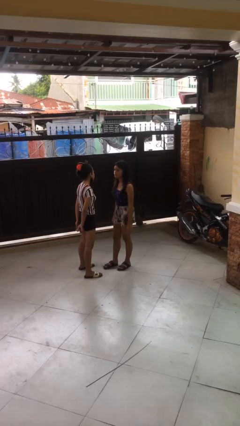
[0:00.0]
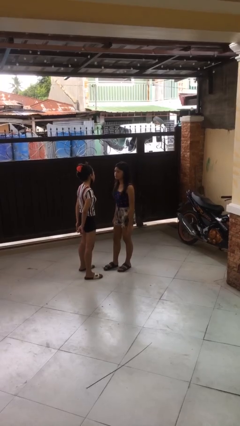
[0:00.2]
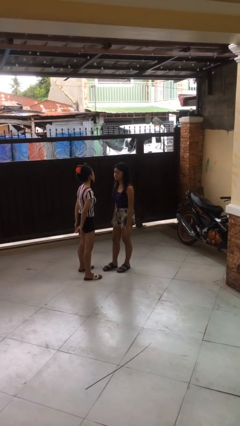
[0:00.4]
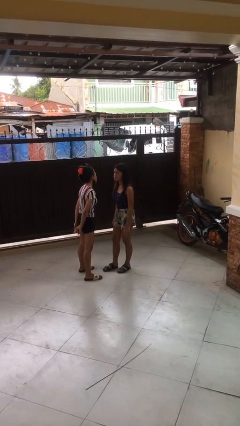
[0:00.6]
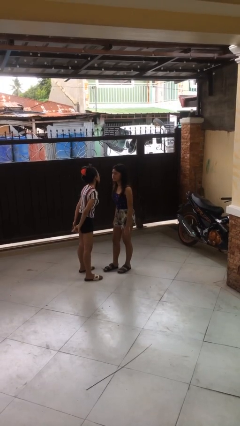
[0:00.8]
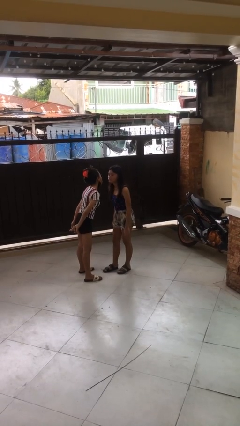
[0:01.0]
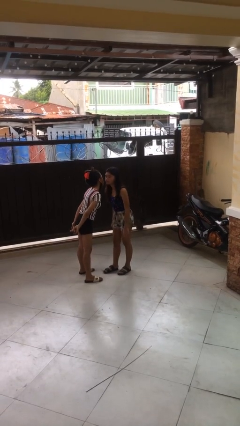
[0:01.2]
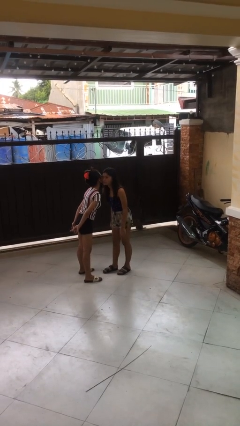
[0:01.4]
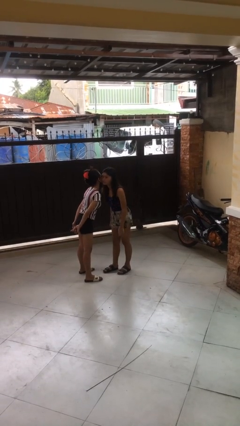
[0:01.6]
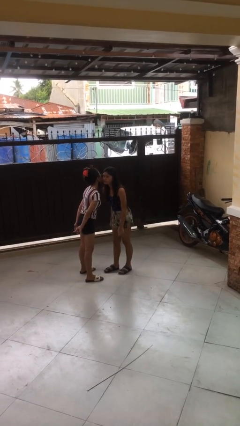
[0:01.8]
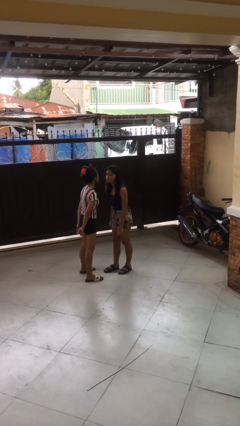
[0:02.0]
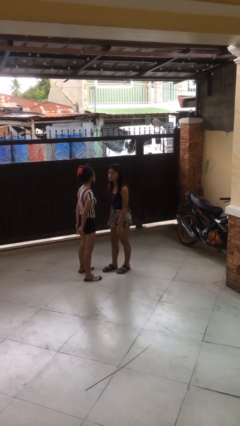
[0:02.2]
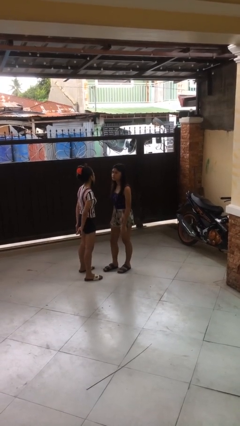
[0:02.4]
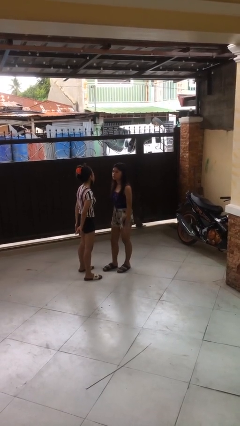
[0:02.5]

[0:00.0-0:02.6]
person kisses cheek of person

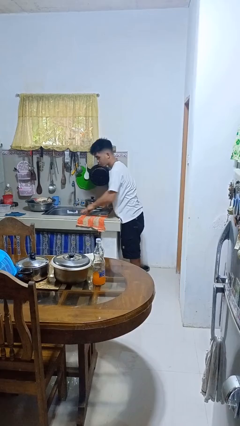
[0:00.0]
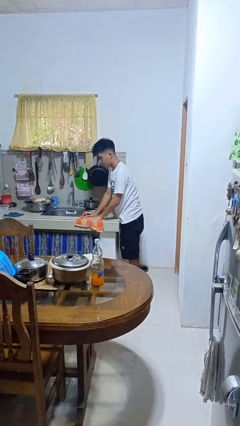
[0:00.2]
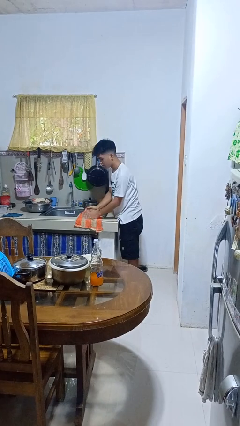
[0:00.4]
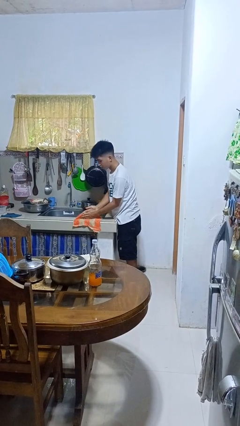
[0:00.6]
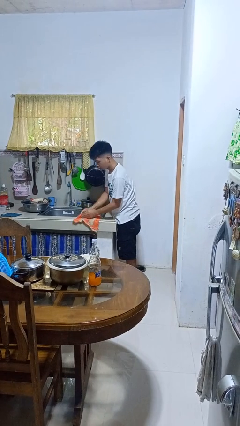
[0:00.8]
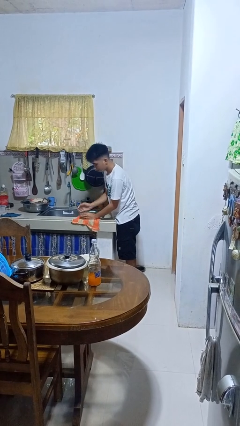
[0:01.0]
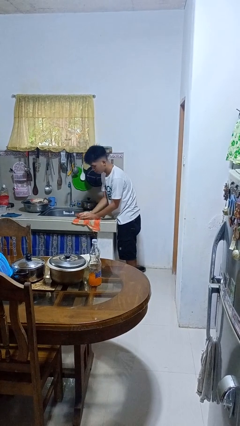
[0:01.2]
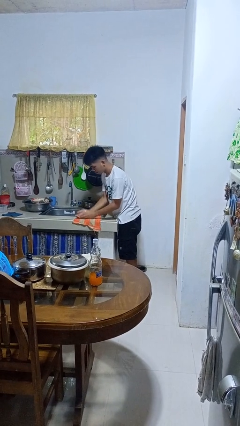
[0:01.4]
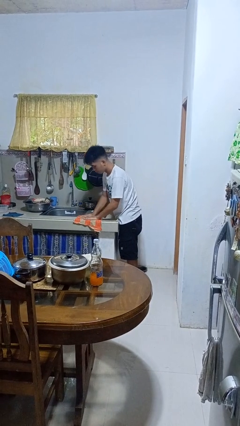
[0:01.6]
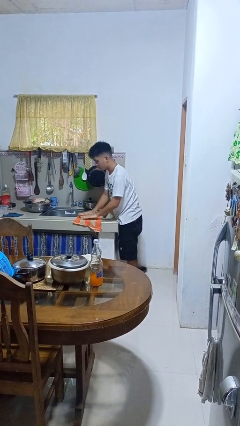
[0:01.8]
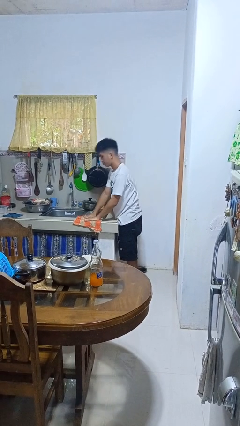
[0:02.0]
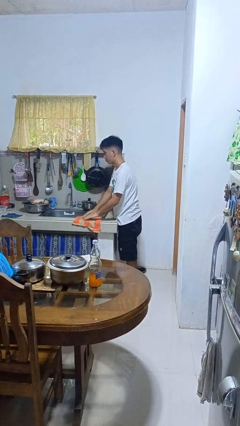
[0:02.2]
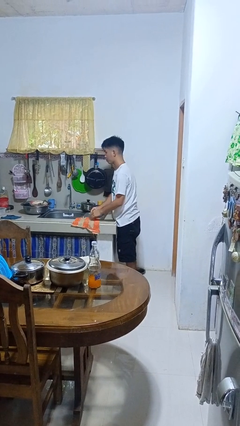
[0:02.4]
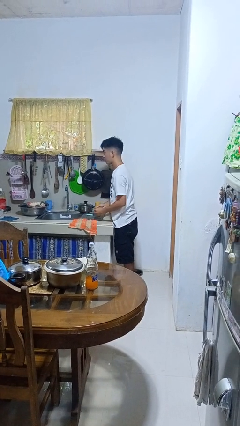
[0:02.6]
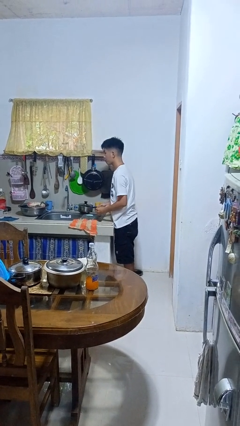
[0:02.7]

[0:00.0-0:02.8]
person dries hands with towel

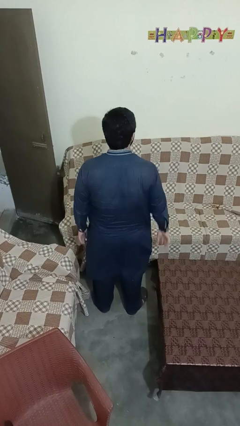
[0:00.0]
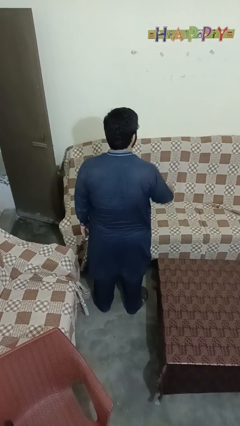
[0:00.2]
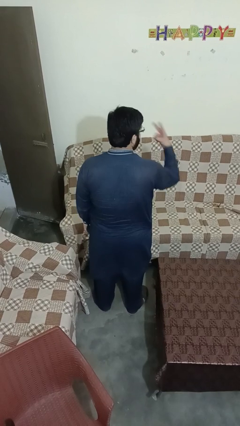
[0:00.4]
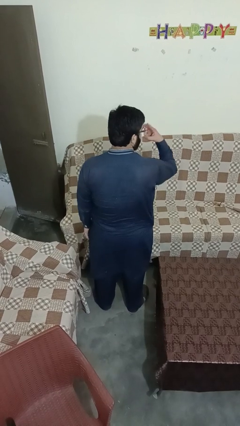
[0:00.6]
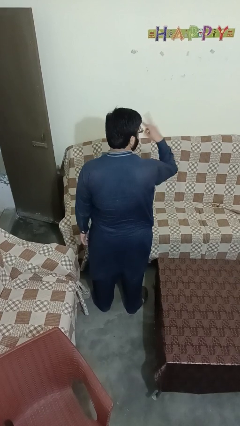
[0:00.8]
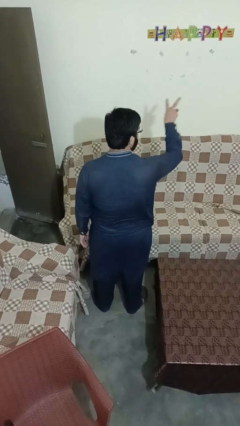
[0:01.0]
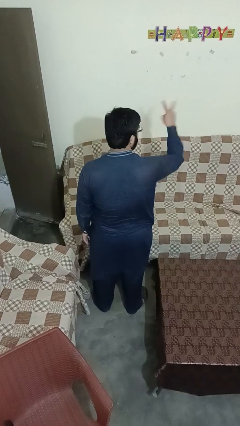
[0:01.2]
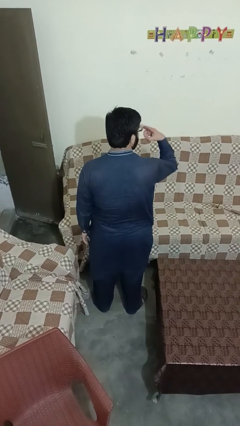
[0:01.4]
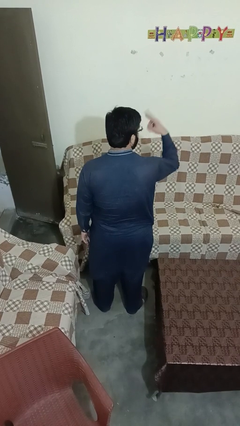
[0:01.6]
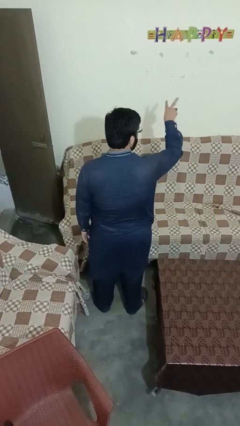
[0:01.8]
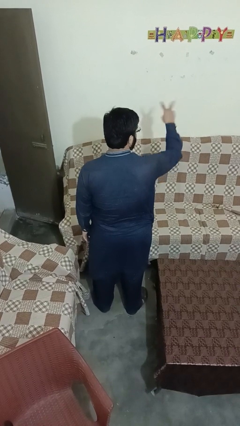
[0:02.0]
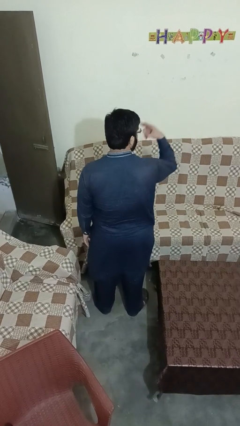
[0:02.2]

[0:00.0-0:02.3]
person gestures watch closely

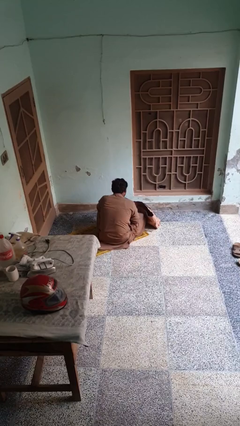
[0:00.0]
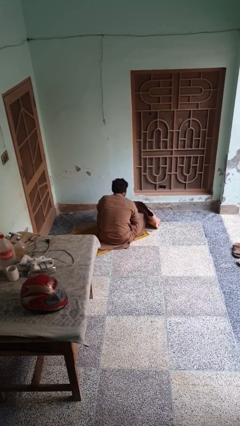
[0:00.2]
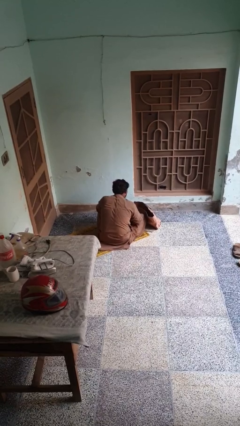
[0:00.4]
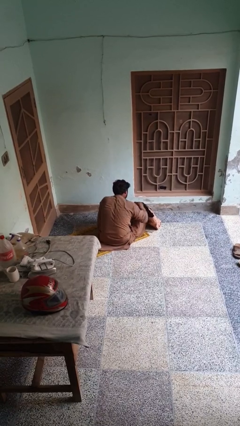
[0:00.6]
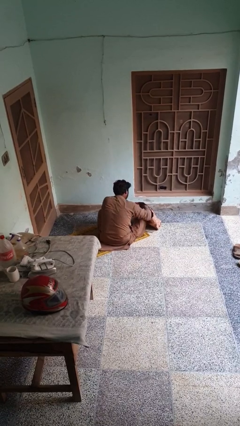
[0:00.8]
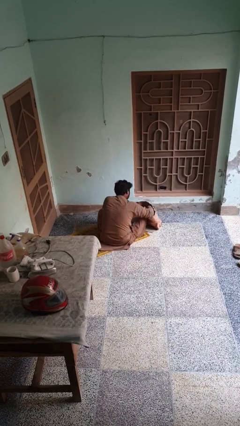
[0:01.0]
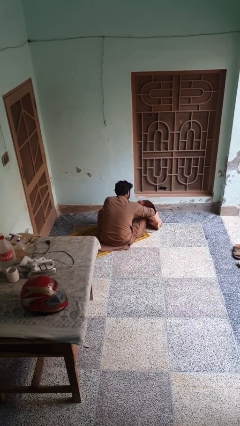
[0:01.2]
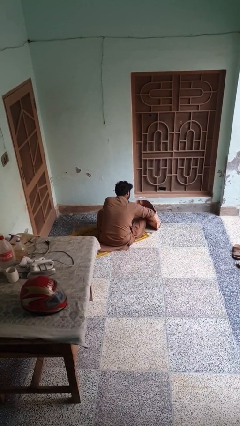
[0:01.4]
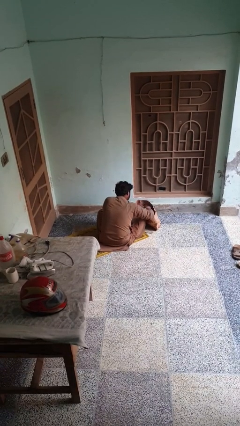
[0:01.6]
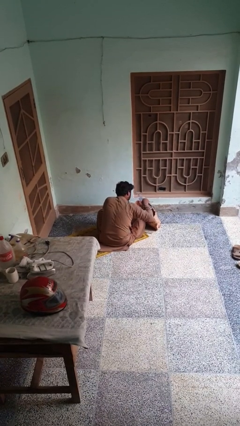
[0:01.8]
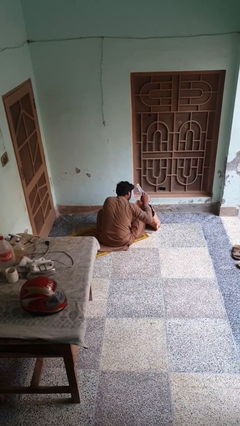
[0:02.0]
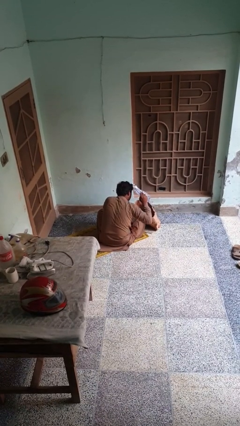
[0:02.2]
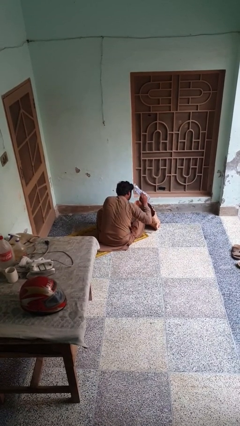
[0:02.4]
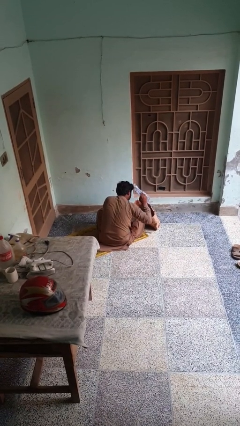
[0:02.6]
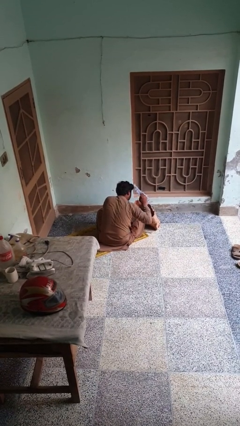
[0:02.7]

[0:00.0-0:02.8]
person searches in bag

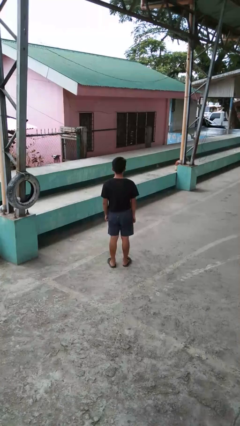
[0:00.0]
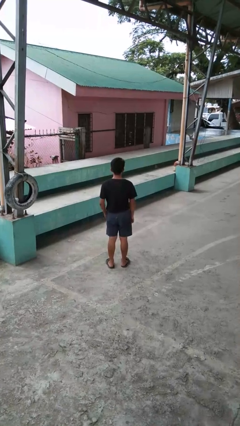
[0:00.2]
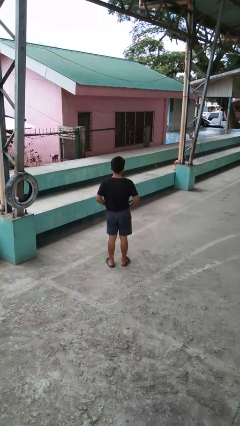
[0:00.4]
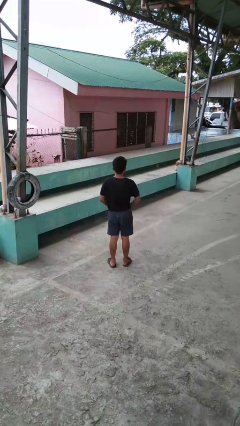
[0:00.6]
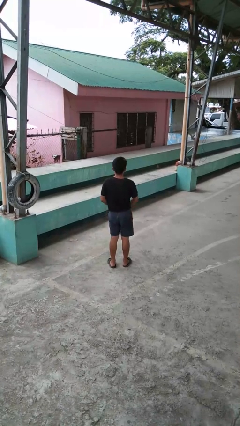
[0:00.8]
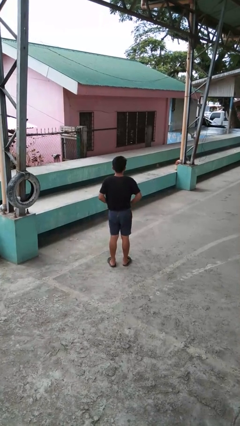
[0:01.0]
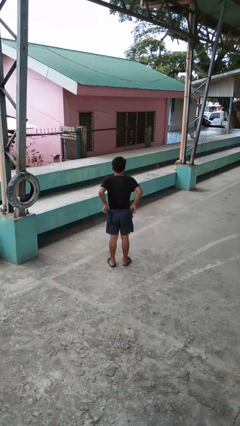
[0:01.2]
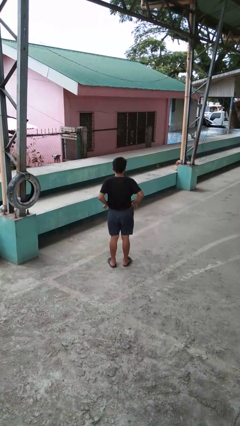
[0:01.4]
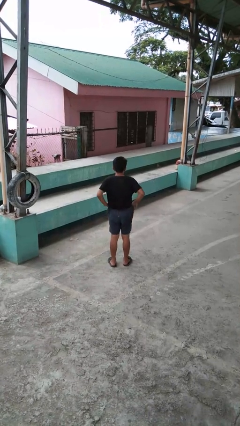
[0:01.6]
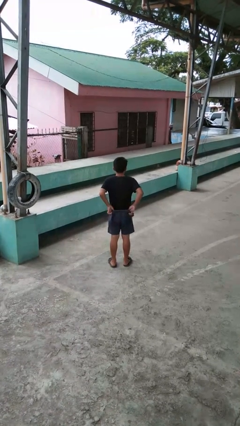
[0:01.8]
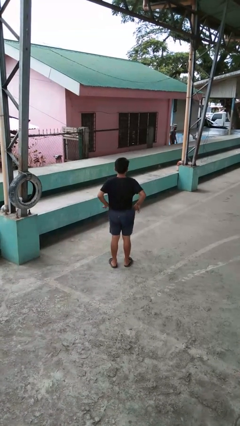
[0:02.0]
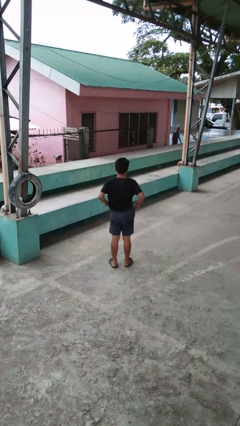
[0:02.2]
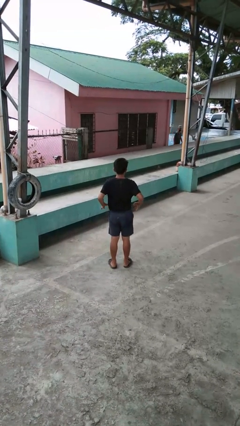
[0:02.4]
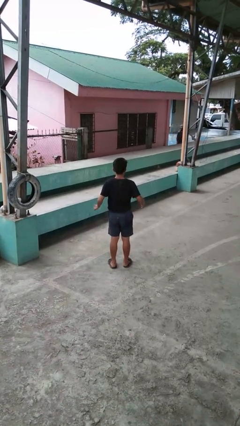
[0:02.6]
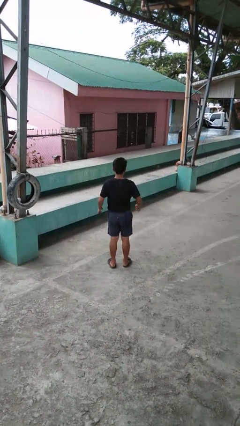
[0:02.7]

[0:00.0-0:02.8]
person hikes up pants

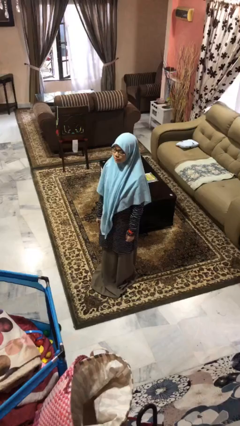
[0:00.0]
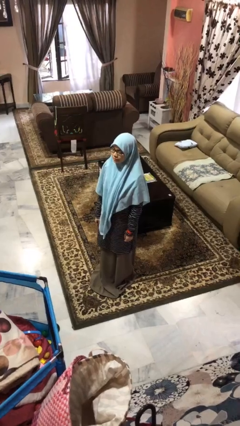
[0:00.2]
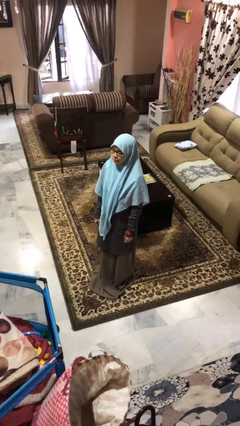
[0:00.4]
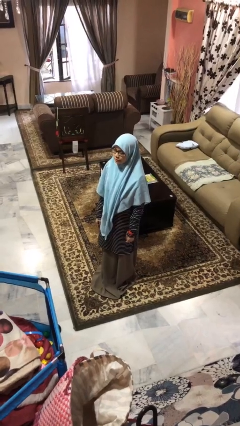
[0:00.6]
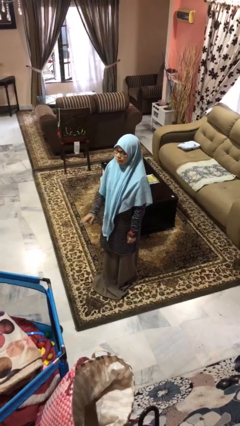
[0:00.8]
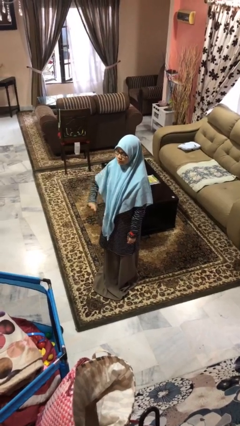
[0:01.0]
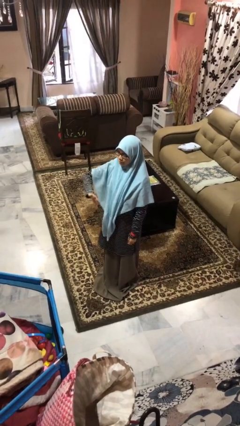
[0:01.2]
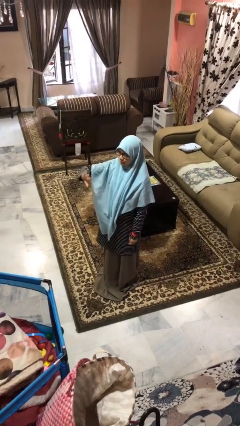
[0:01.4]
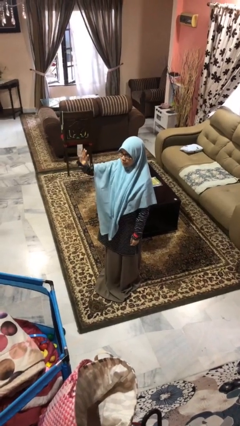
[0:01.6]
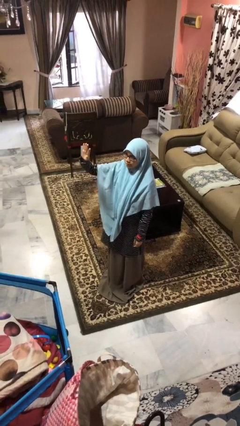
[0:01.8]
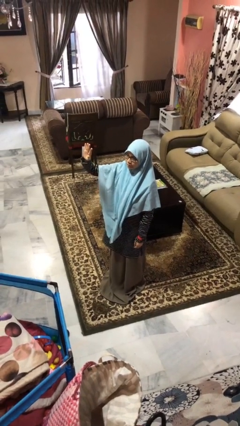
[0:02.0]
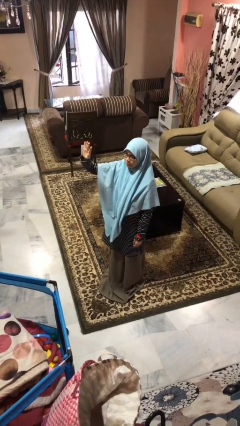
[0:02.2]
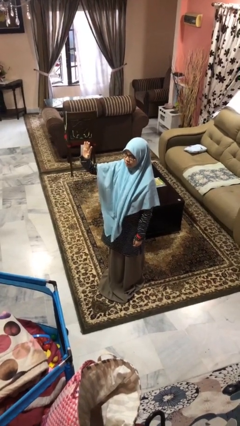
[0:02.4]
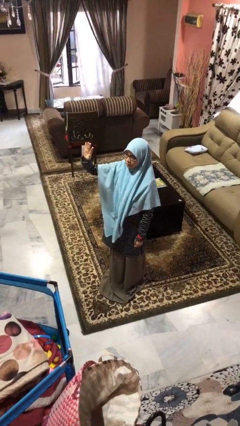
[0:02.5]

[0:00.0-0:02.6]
person gestures swipe up

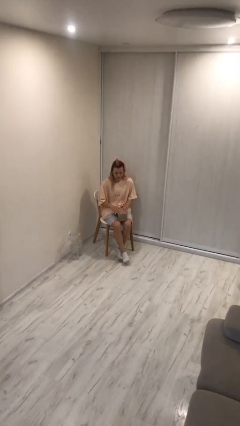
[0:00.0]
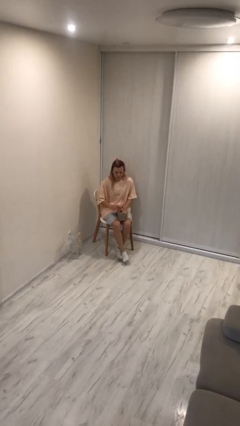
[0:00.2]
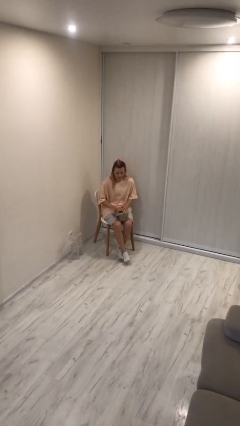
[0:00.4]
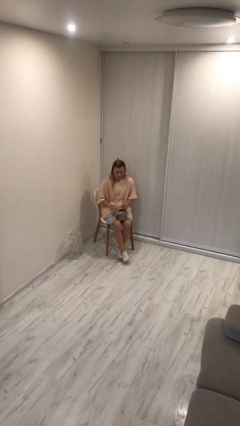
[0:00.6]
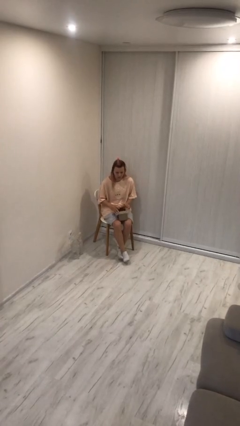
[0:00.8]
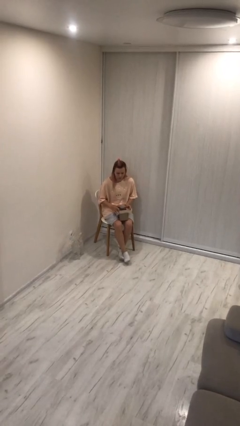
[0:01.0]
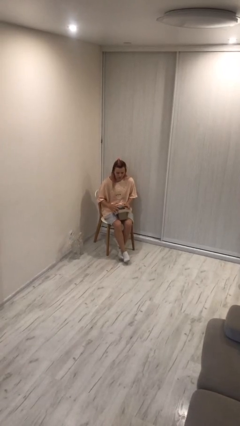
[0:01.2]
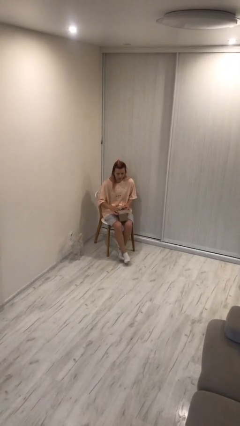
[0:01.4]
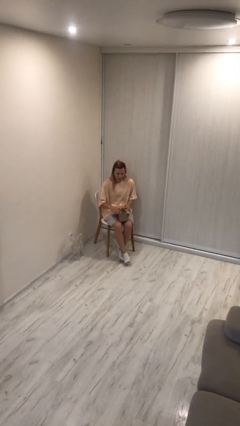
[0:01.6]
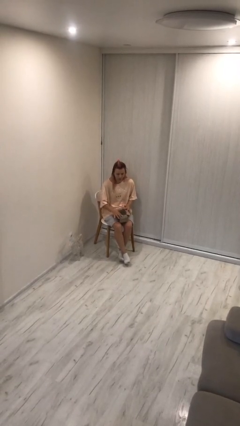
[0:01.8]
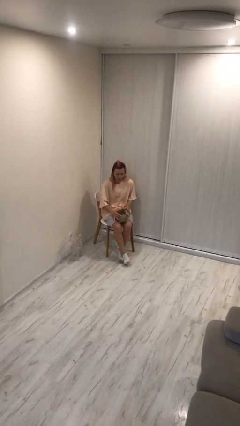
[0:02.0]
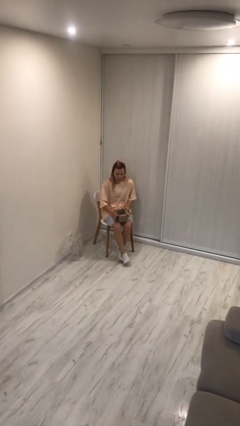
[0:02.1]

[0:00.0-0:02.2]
person opens box
